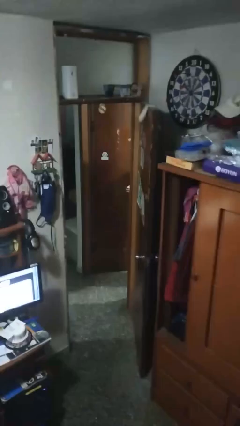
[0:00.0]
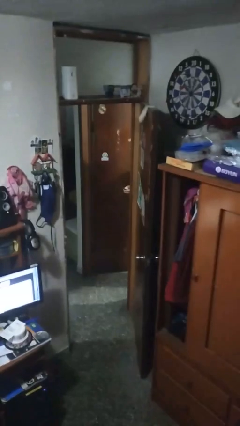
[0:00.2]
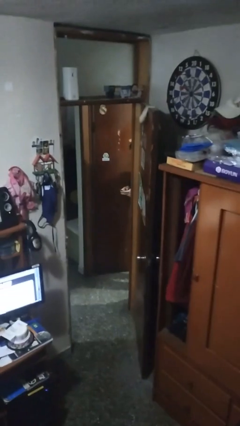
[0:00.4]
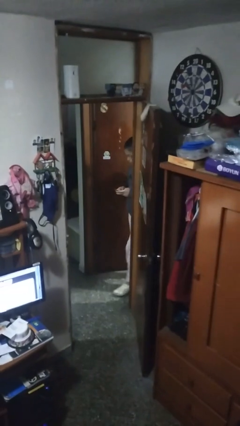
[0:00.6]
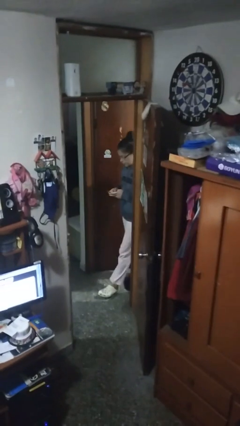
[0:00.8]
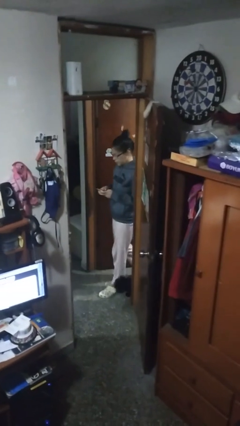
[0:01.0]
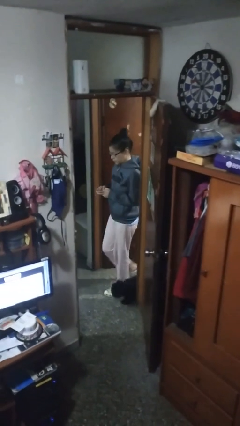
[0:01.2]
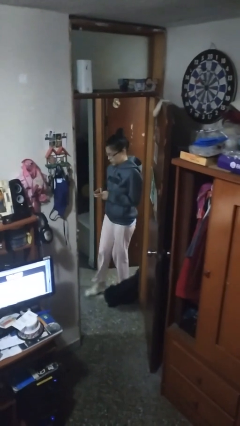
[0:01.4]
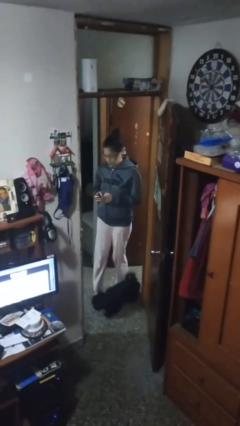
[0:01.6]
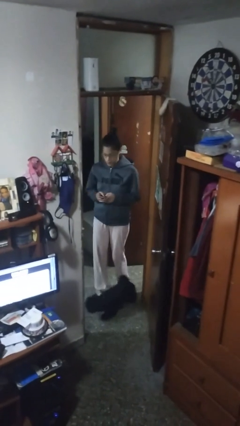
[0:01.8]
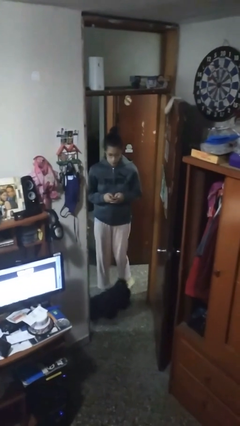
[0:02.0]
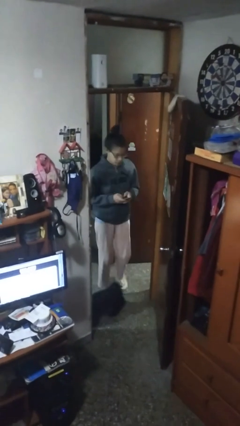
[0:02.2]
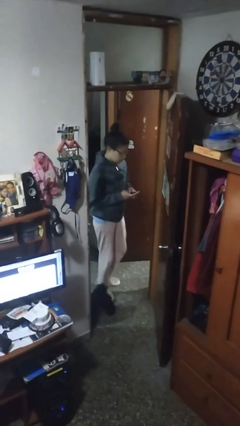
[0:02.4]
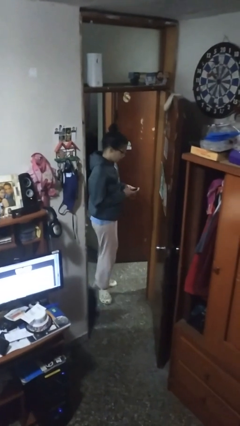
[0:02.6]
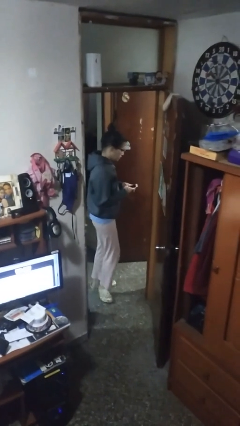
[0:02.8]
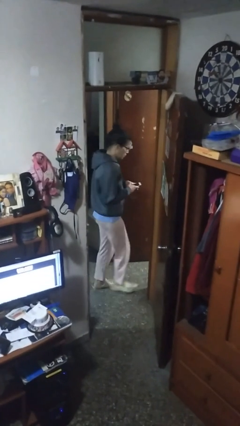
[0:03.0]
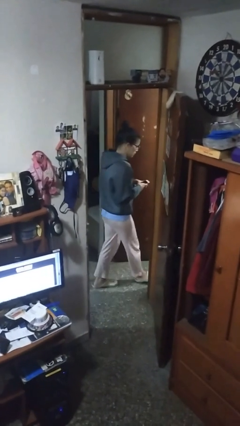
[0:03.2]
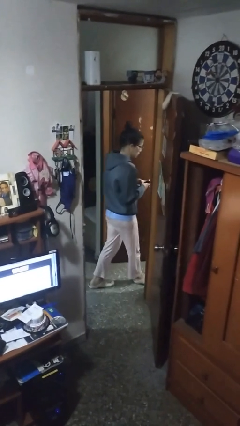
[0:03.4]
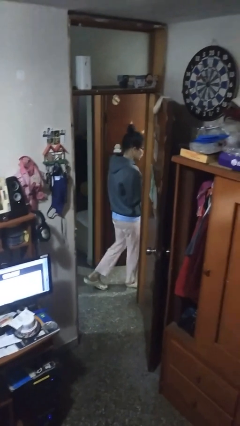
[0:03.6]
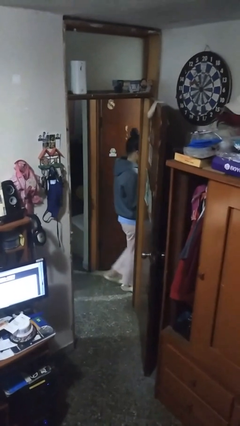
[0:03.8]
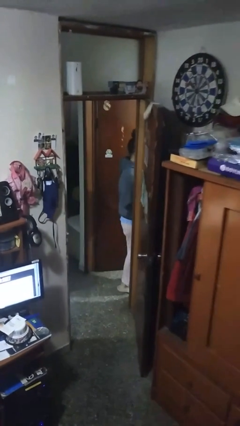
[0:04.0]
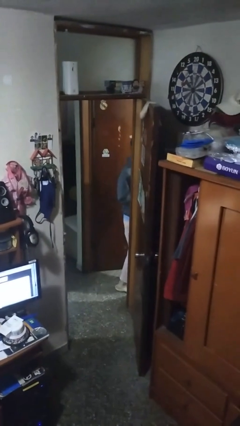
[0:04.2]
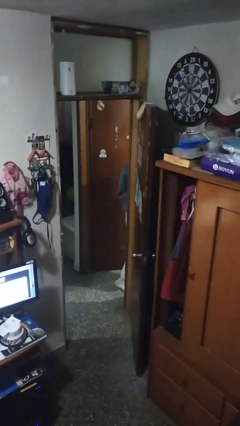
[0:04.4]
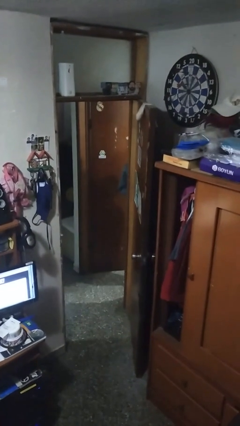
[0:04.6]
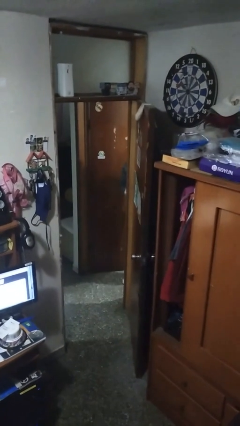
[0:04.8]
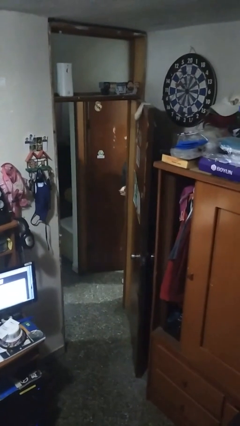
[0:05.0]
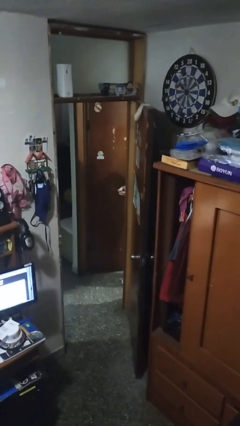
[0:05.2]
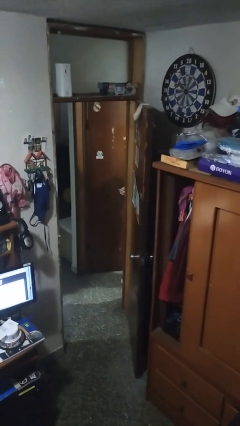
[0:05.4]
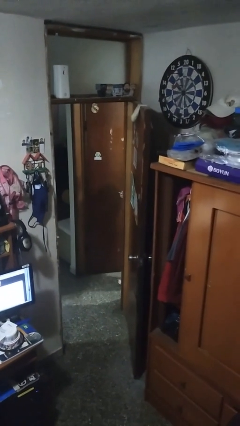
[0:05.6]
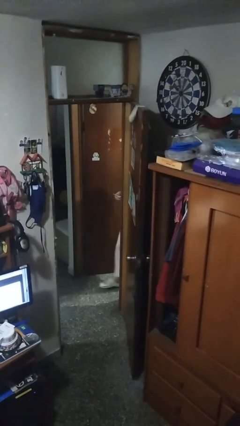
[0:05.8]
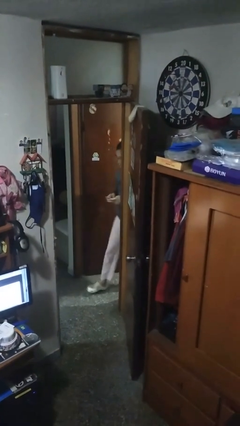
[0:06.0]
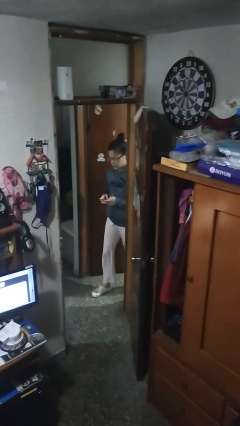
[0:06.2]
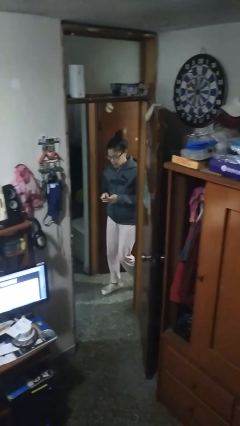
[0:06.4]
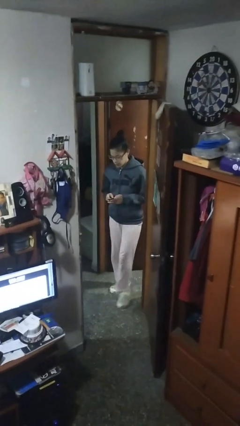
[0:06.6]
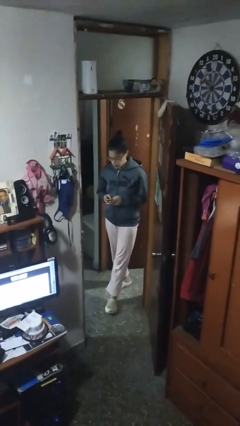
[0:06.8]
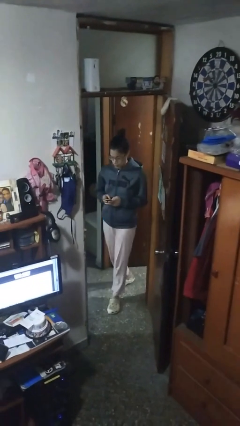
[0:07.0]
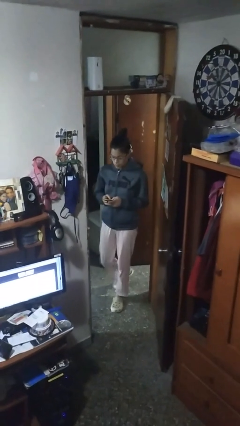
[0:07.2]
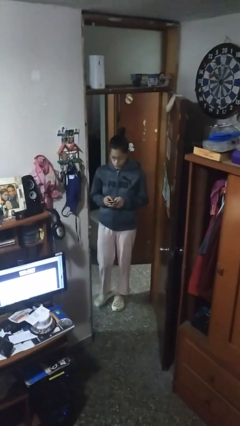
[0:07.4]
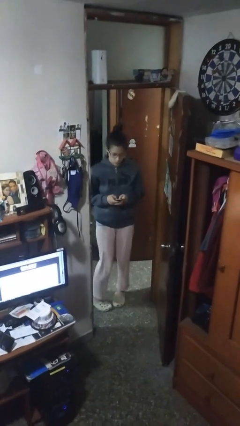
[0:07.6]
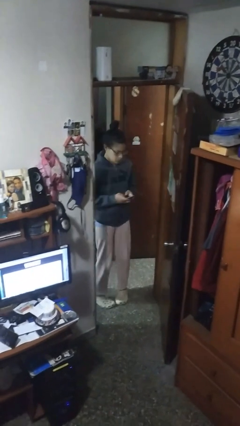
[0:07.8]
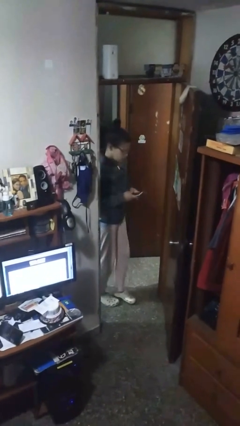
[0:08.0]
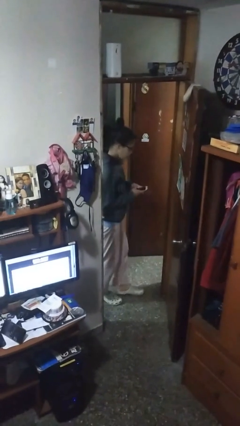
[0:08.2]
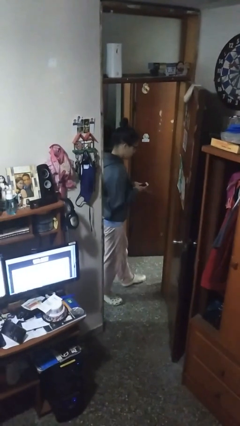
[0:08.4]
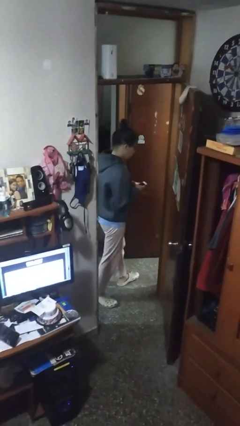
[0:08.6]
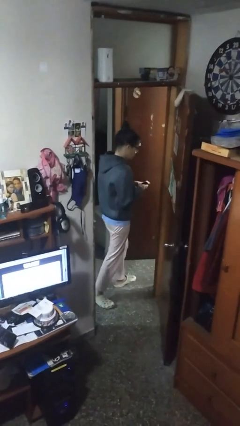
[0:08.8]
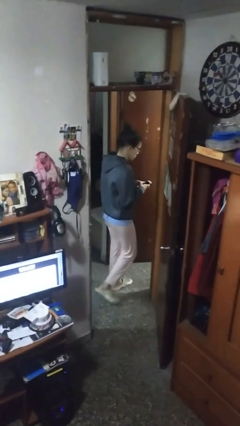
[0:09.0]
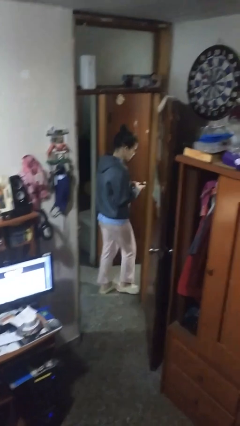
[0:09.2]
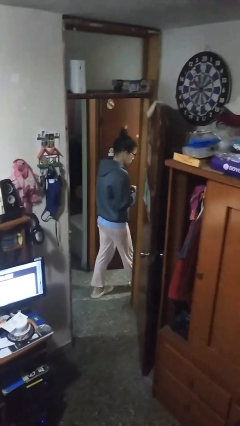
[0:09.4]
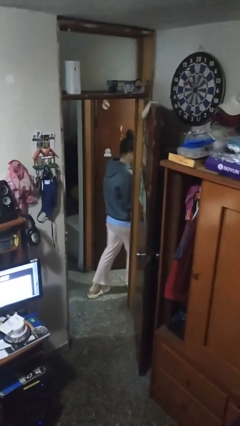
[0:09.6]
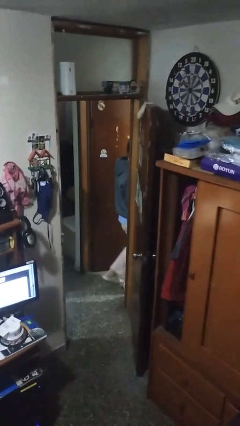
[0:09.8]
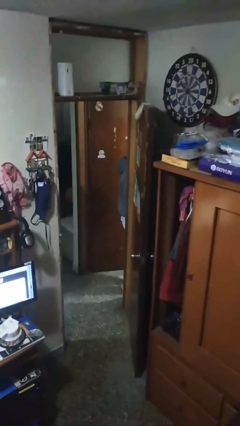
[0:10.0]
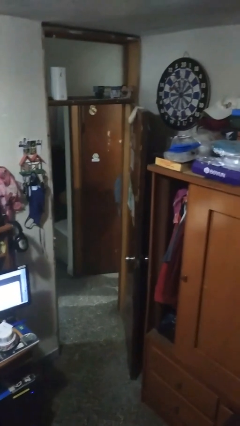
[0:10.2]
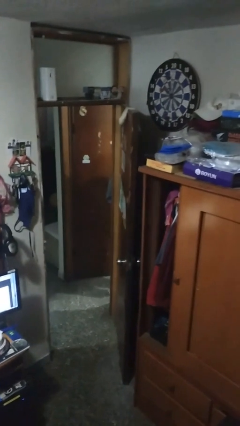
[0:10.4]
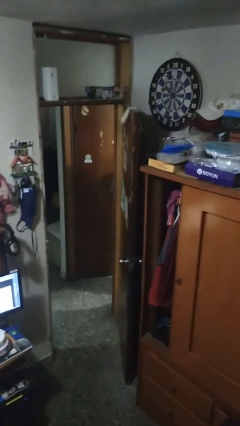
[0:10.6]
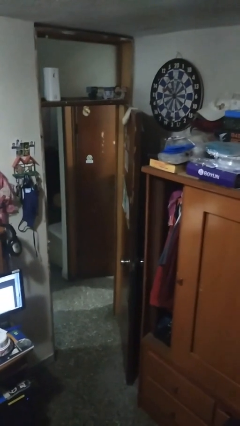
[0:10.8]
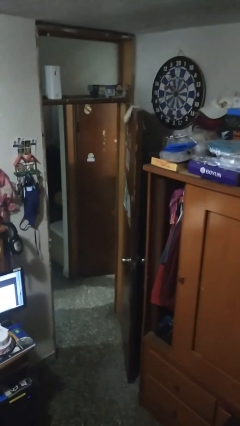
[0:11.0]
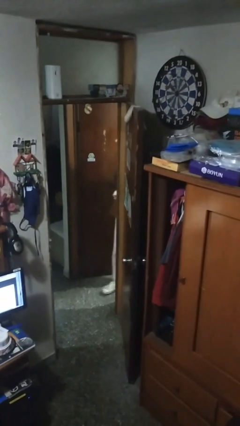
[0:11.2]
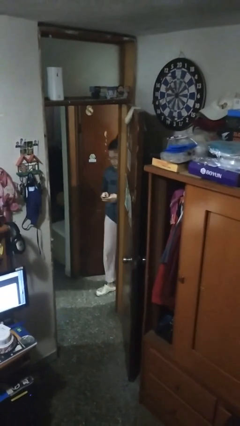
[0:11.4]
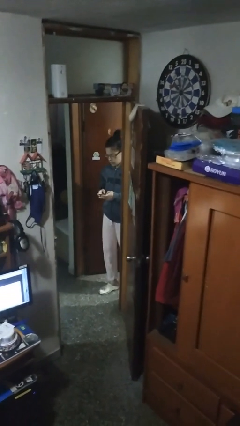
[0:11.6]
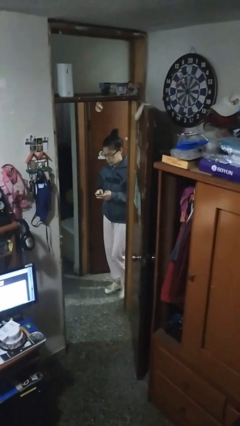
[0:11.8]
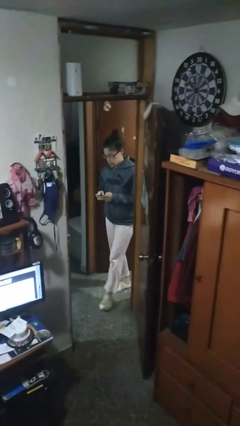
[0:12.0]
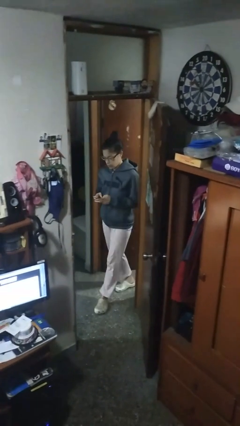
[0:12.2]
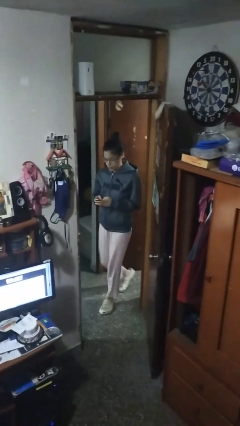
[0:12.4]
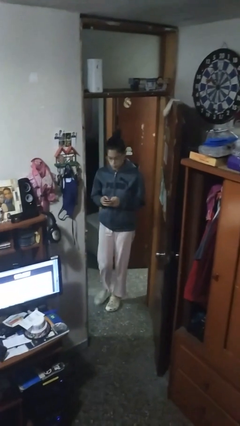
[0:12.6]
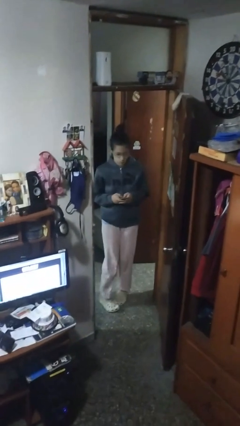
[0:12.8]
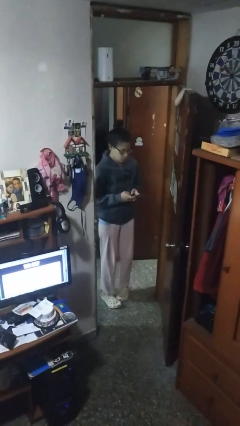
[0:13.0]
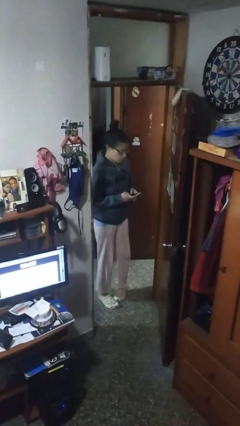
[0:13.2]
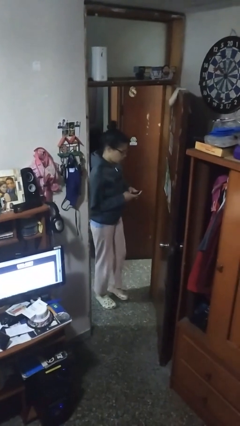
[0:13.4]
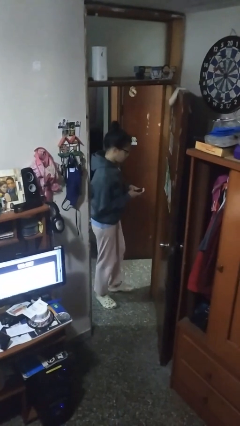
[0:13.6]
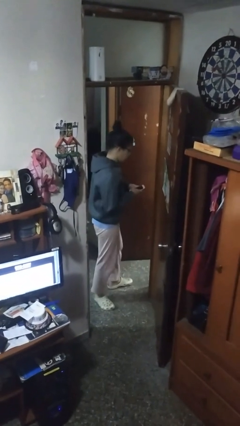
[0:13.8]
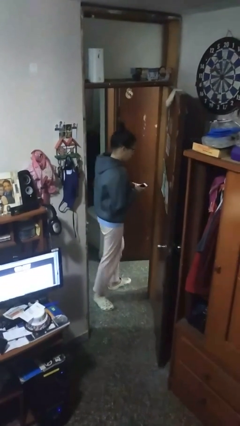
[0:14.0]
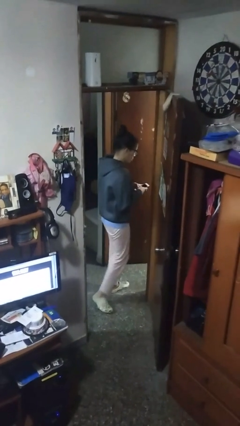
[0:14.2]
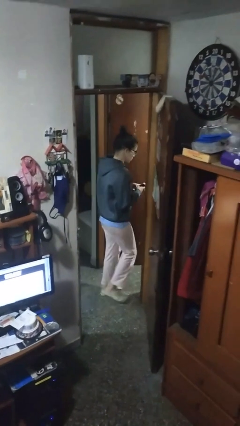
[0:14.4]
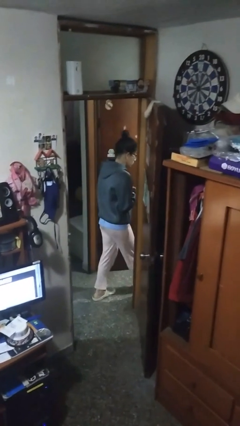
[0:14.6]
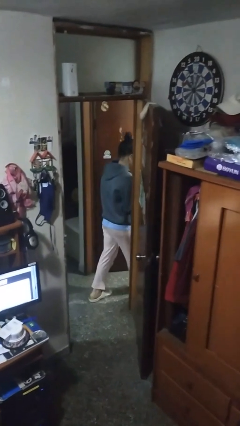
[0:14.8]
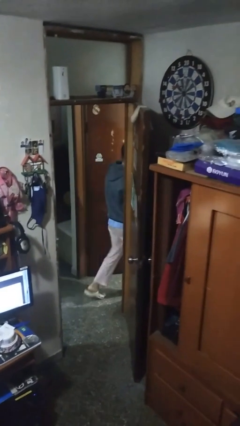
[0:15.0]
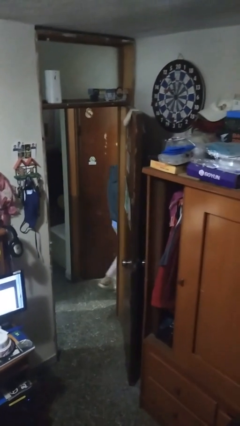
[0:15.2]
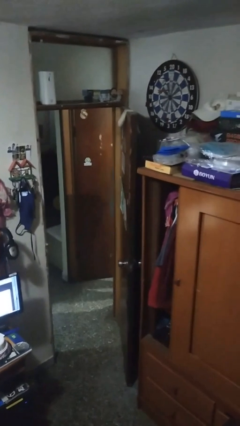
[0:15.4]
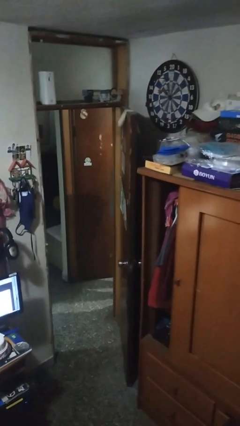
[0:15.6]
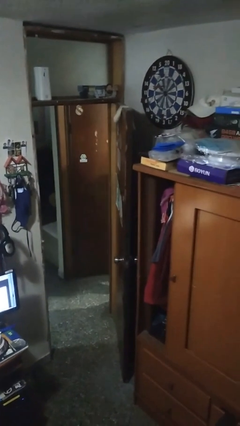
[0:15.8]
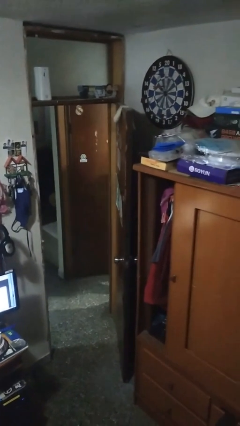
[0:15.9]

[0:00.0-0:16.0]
person texts on phone

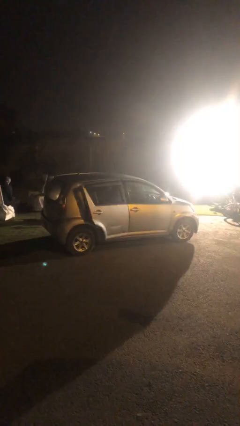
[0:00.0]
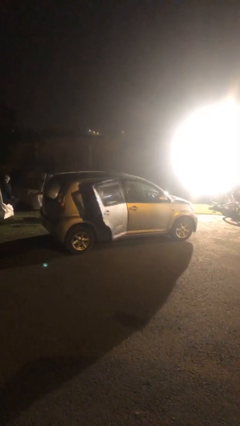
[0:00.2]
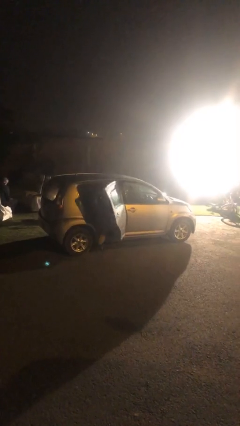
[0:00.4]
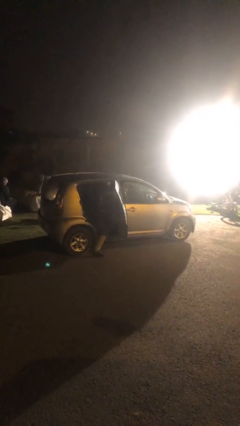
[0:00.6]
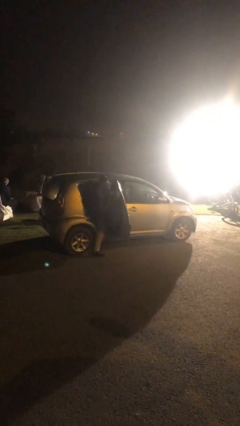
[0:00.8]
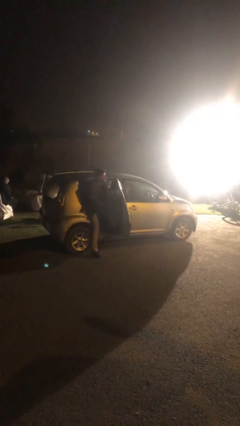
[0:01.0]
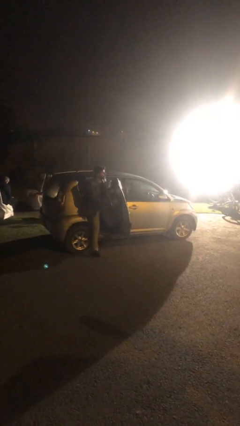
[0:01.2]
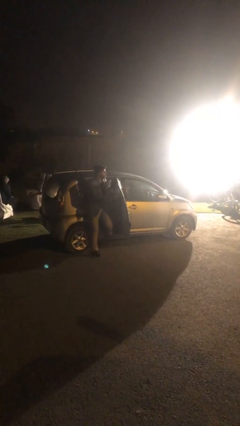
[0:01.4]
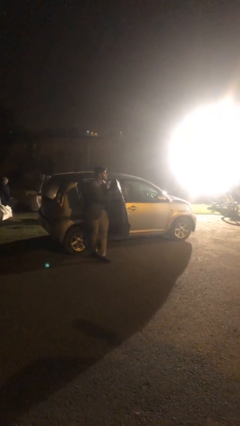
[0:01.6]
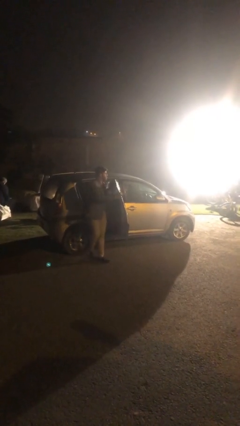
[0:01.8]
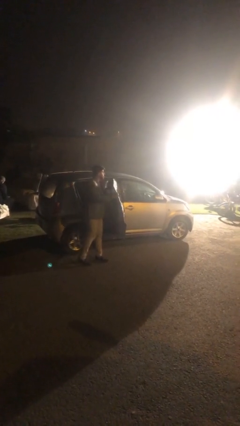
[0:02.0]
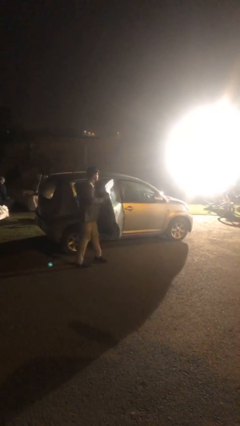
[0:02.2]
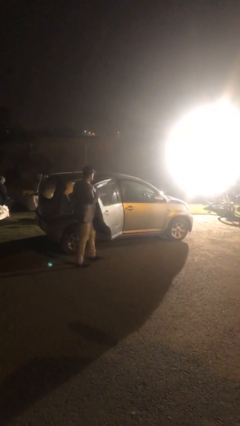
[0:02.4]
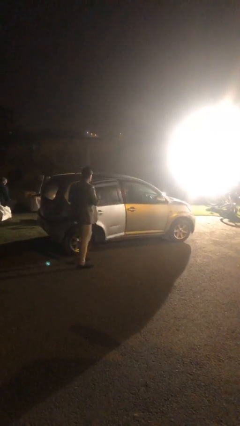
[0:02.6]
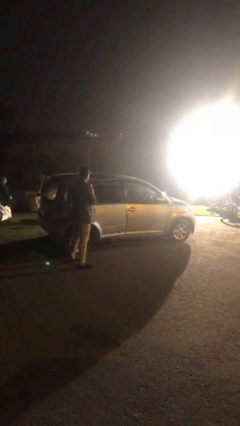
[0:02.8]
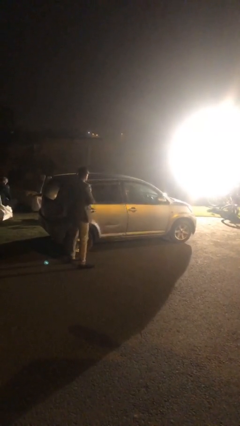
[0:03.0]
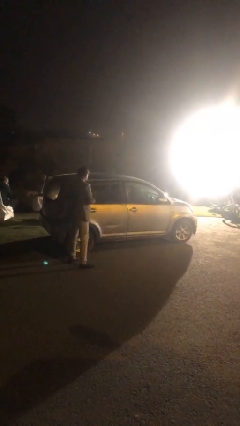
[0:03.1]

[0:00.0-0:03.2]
car drops off person
